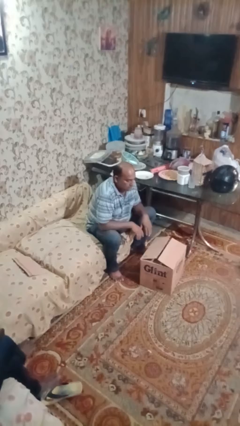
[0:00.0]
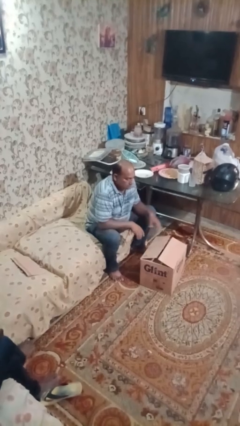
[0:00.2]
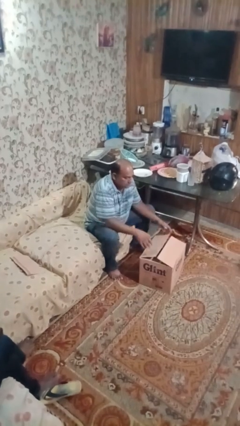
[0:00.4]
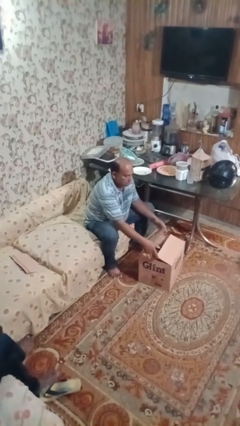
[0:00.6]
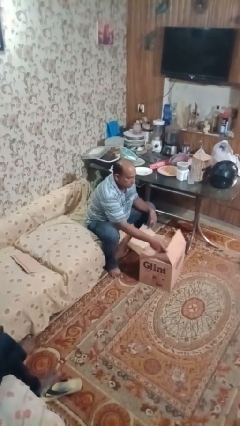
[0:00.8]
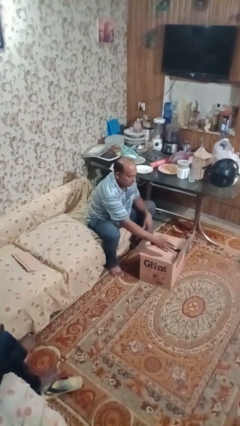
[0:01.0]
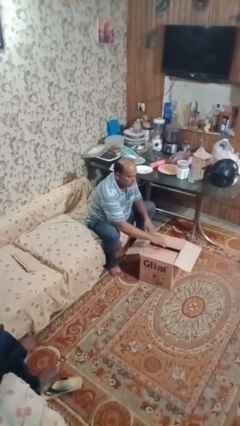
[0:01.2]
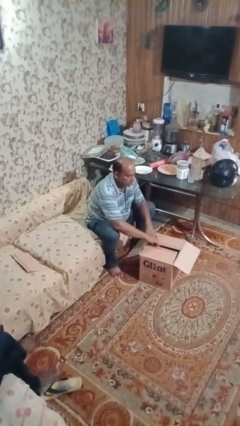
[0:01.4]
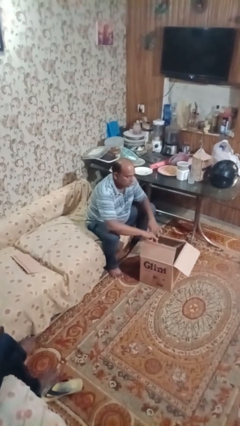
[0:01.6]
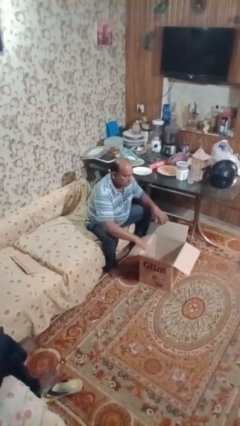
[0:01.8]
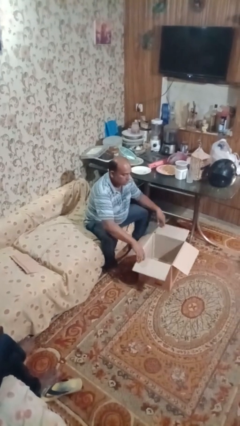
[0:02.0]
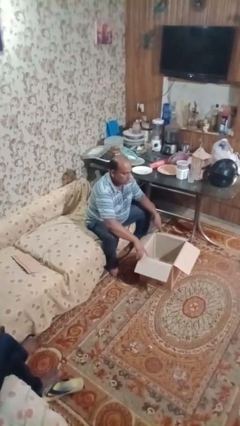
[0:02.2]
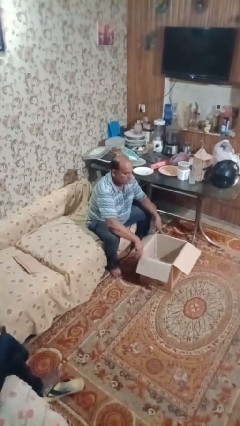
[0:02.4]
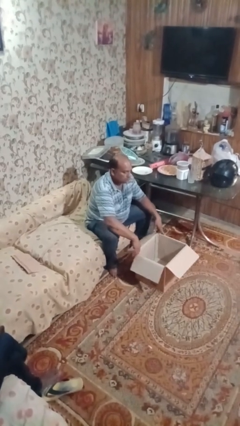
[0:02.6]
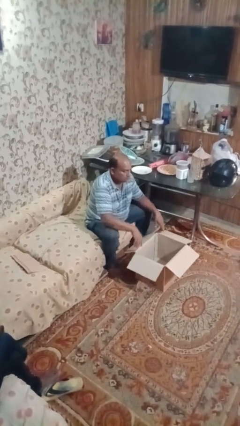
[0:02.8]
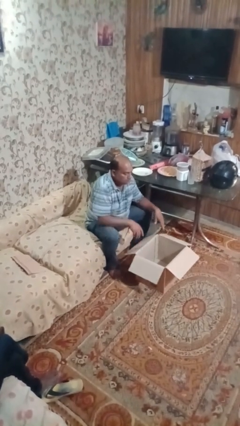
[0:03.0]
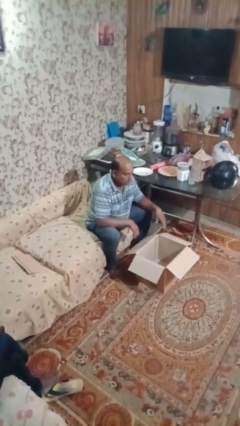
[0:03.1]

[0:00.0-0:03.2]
person opens box

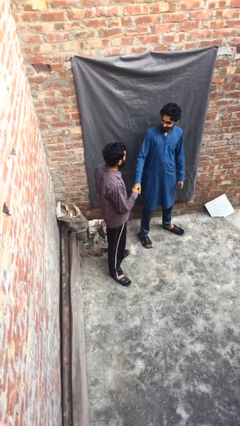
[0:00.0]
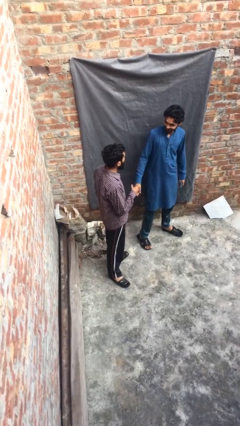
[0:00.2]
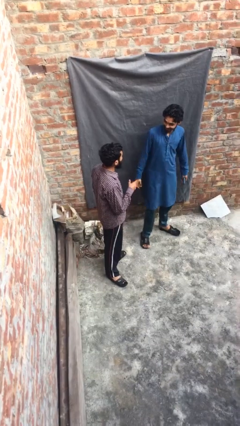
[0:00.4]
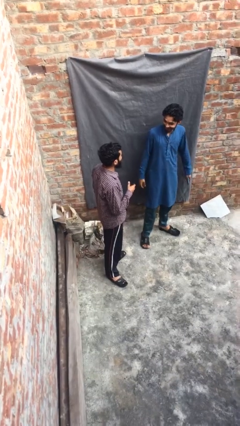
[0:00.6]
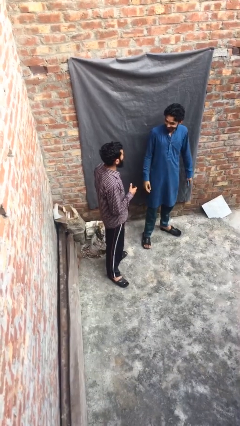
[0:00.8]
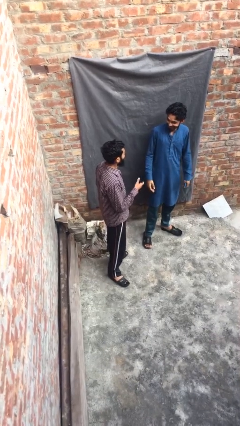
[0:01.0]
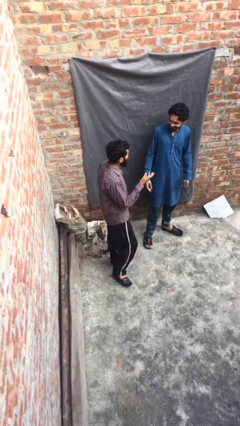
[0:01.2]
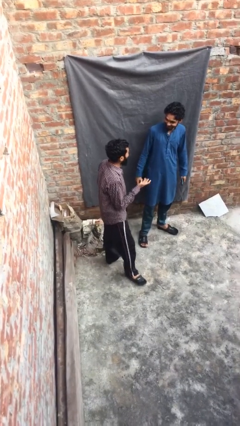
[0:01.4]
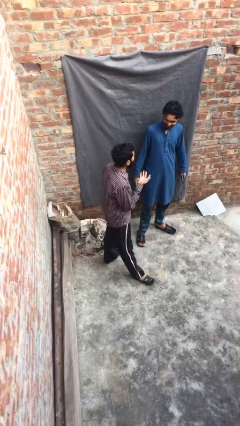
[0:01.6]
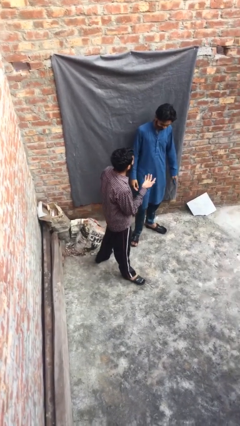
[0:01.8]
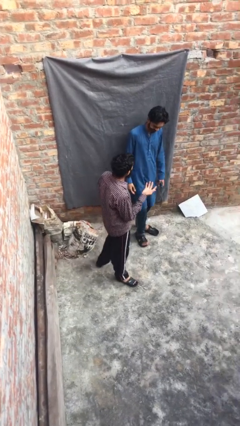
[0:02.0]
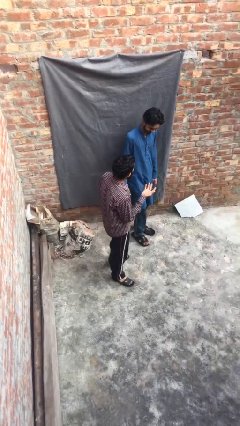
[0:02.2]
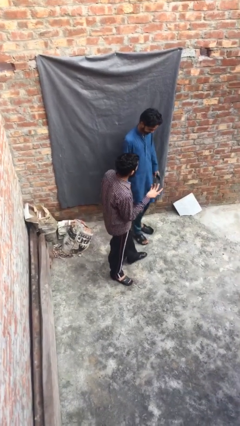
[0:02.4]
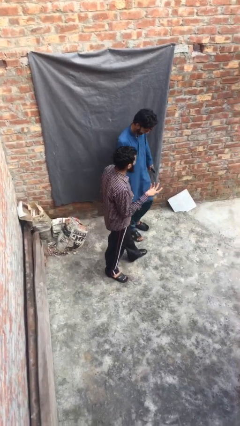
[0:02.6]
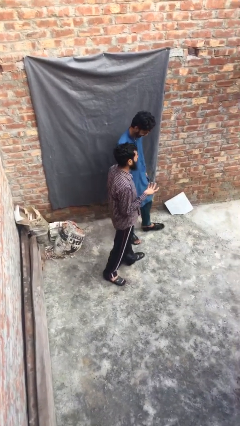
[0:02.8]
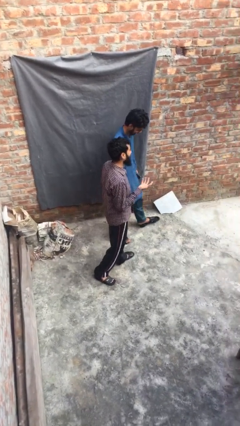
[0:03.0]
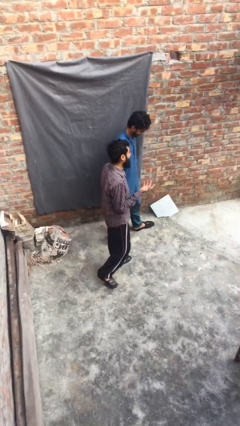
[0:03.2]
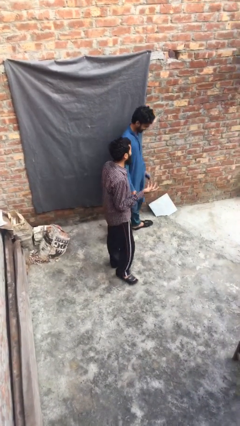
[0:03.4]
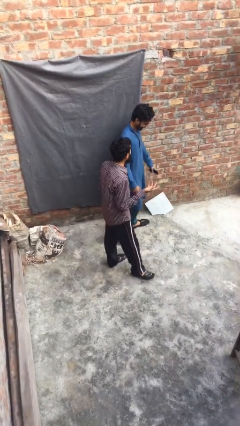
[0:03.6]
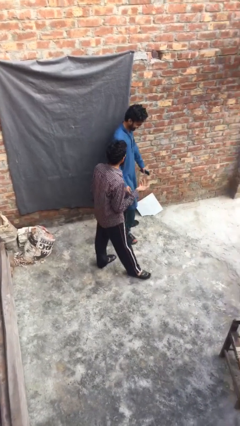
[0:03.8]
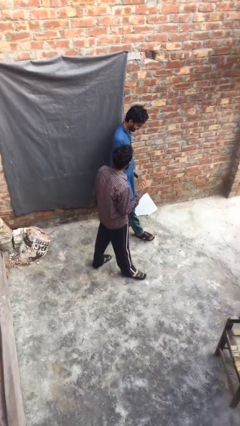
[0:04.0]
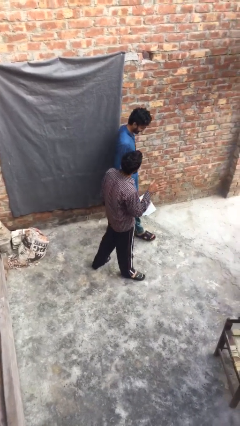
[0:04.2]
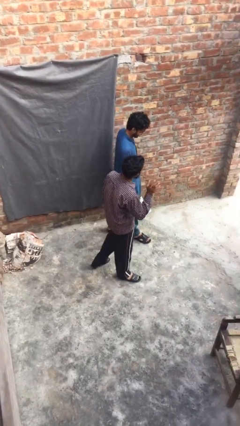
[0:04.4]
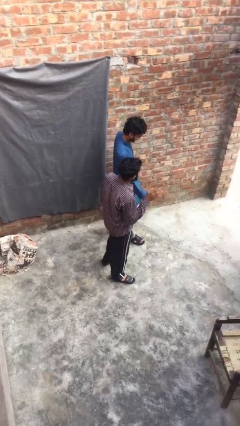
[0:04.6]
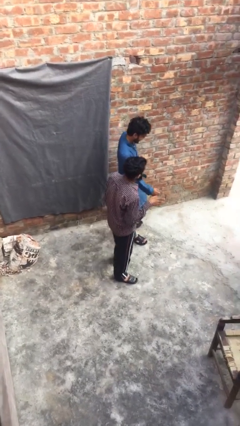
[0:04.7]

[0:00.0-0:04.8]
person talks to person

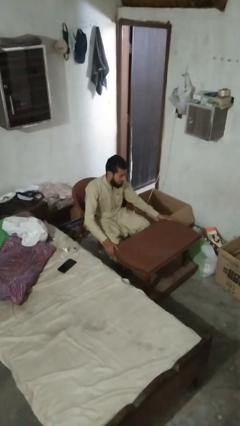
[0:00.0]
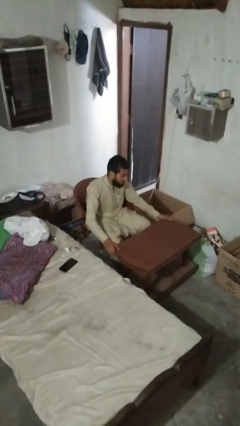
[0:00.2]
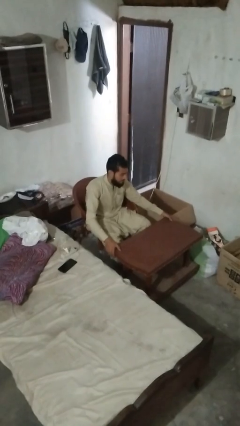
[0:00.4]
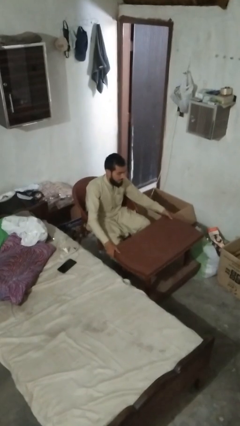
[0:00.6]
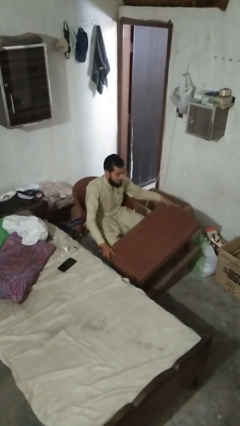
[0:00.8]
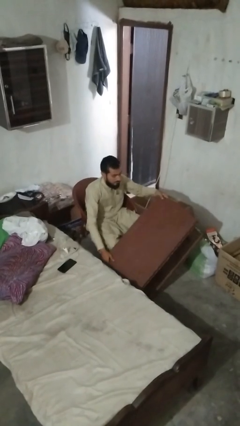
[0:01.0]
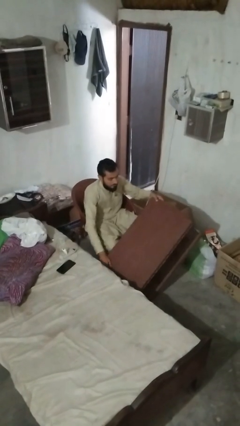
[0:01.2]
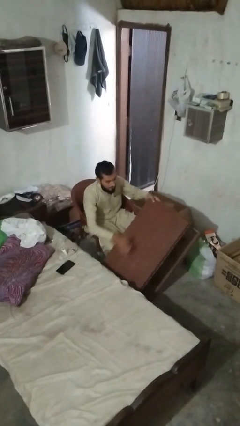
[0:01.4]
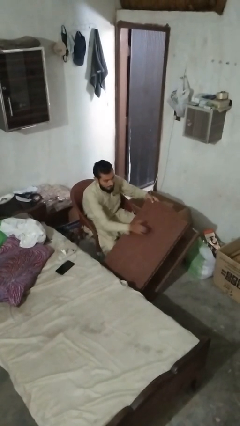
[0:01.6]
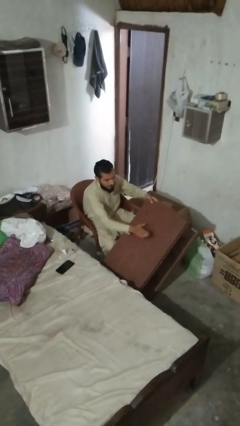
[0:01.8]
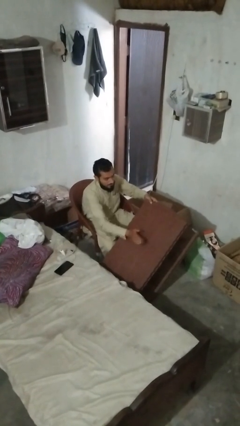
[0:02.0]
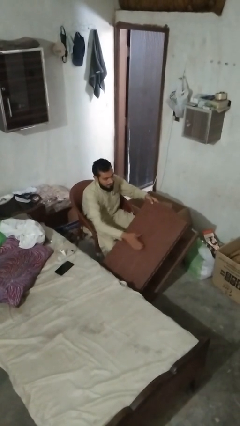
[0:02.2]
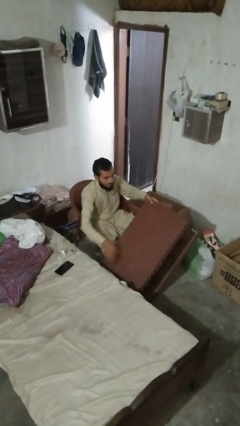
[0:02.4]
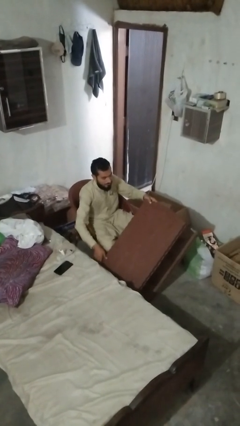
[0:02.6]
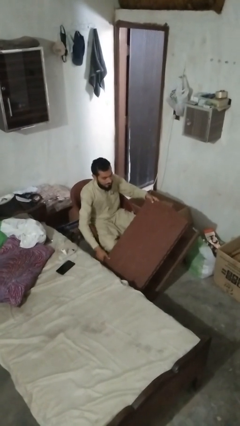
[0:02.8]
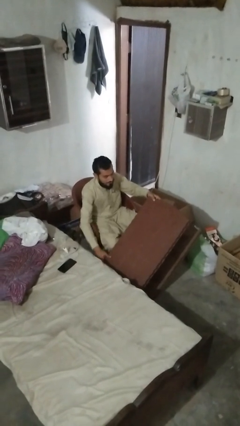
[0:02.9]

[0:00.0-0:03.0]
person knocks over furniture

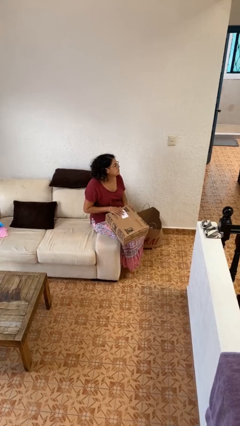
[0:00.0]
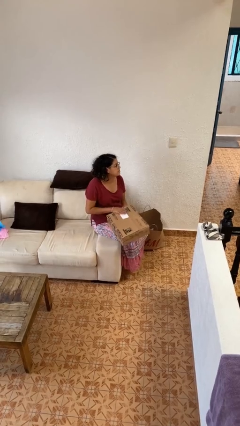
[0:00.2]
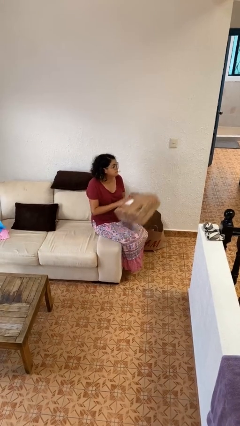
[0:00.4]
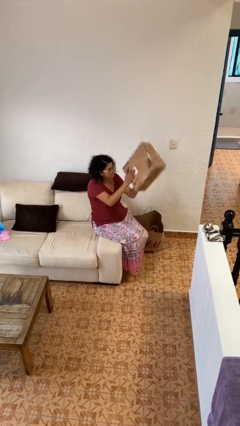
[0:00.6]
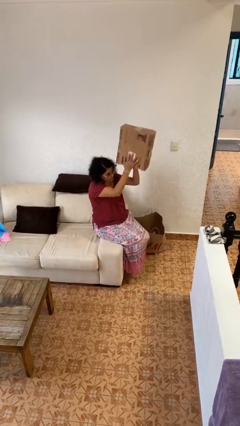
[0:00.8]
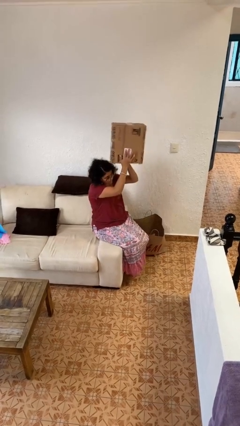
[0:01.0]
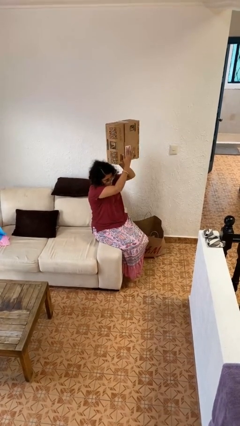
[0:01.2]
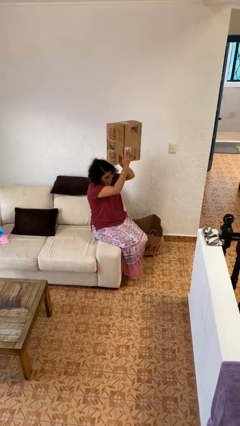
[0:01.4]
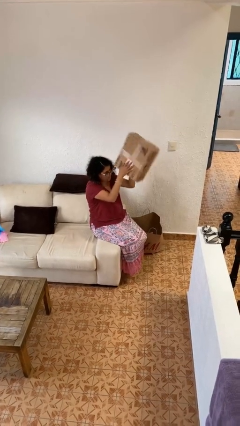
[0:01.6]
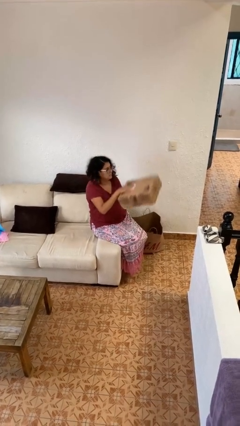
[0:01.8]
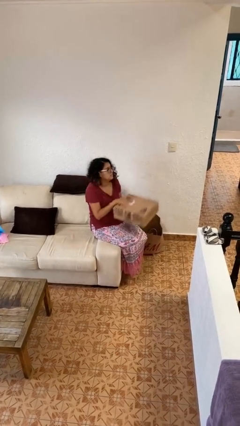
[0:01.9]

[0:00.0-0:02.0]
person holds object above head

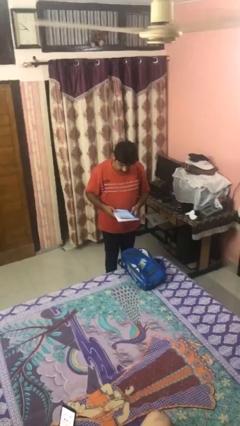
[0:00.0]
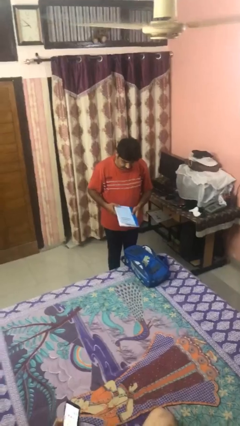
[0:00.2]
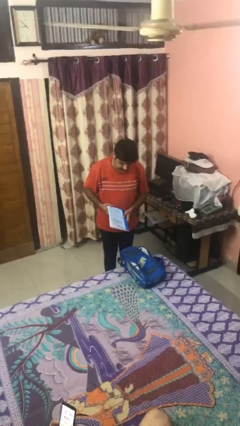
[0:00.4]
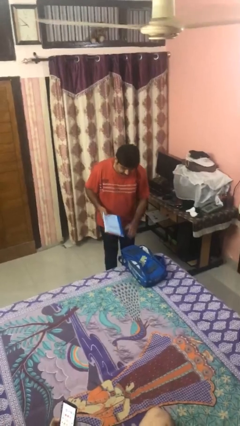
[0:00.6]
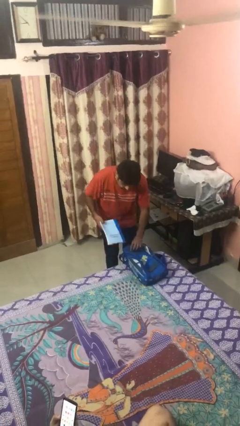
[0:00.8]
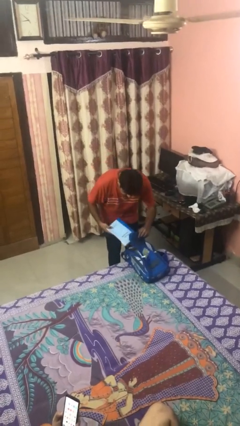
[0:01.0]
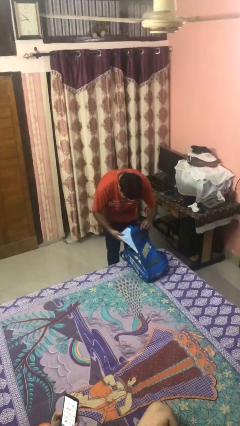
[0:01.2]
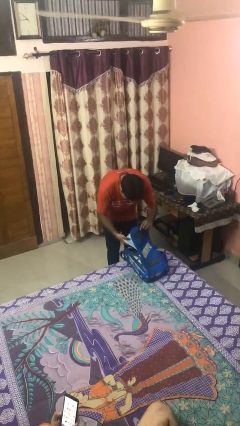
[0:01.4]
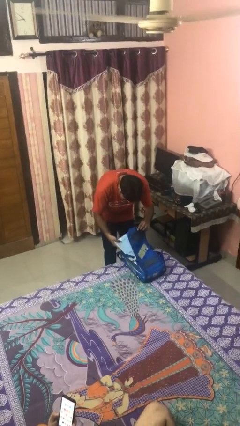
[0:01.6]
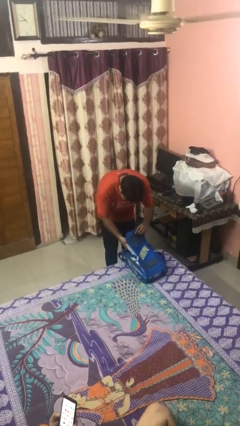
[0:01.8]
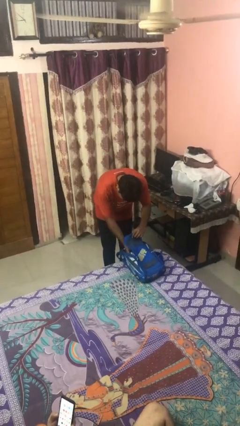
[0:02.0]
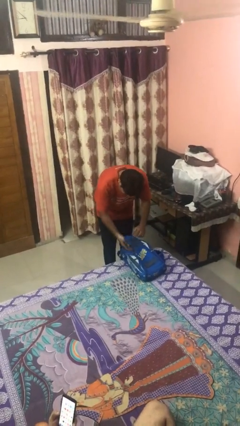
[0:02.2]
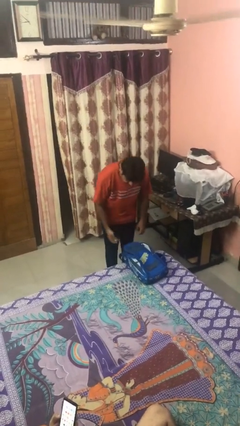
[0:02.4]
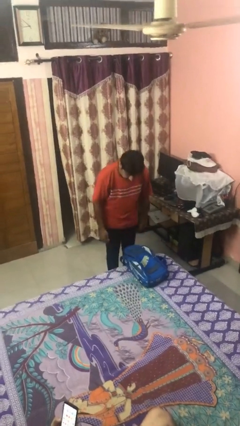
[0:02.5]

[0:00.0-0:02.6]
person puts object into backpack

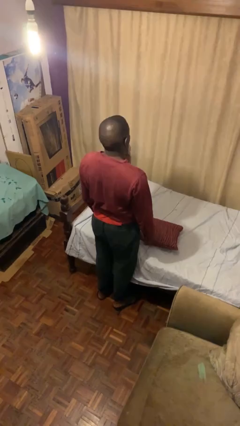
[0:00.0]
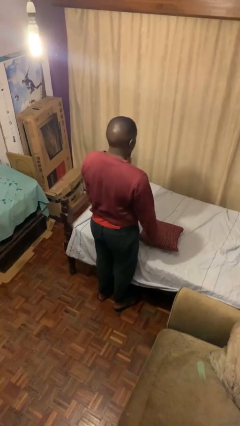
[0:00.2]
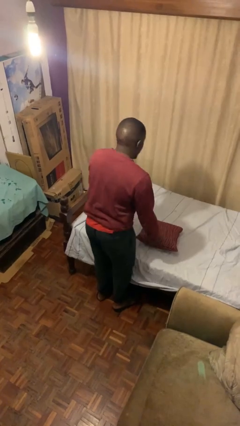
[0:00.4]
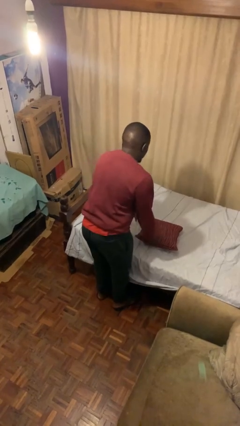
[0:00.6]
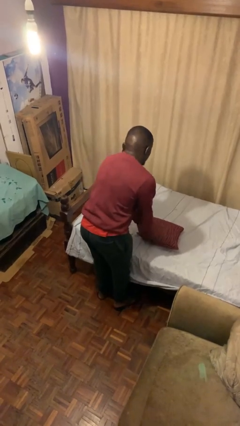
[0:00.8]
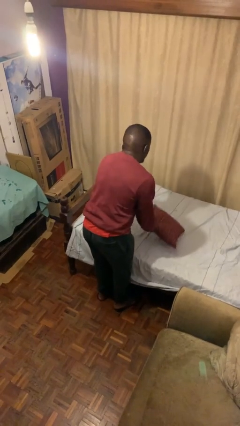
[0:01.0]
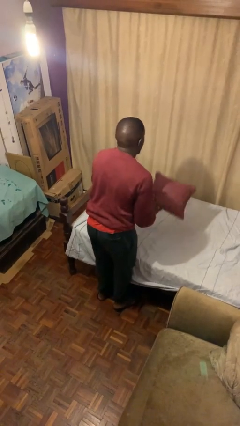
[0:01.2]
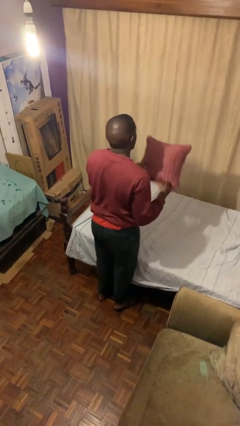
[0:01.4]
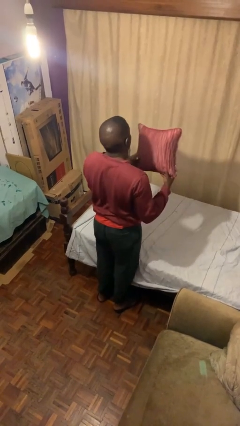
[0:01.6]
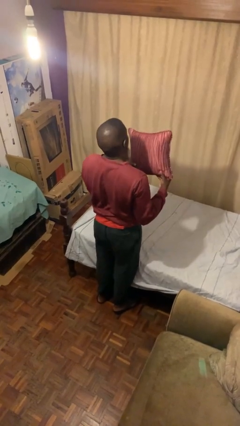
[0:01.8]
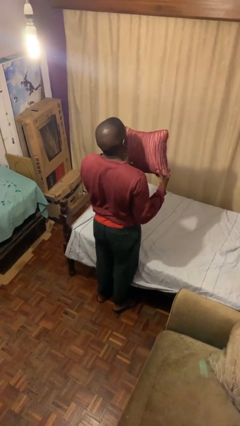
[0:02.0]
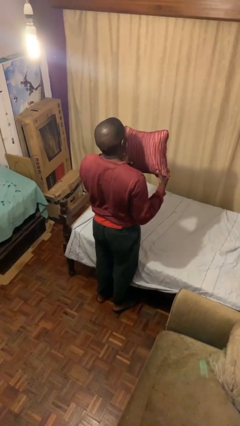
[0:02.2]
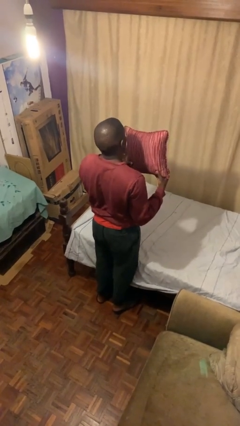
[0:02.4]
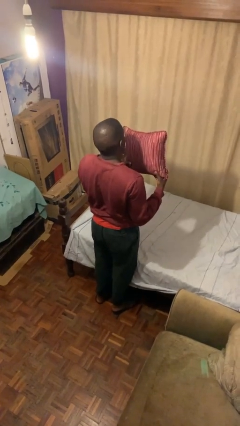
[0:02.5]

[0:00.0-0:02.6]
person picks up object from bed
